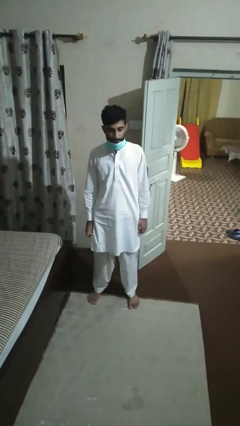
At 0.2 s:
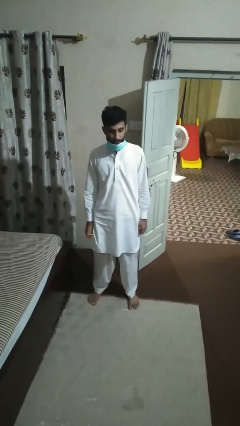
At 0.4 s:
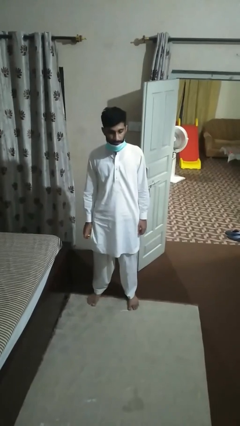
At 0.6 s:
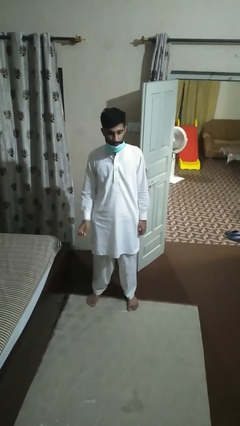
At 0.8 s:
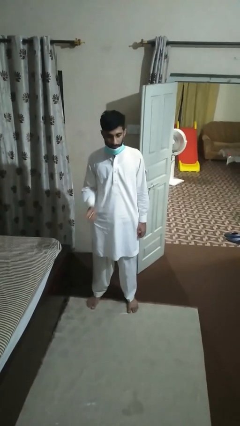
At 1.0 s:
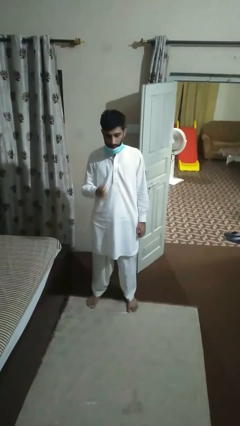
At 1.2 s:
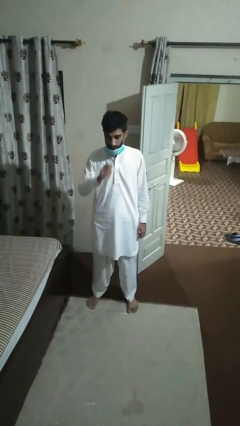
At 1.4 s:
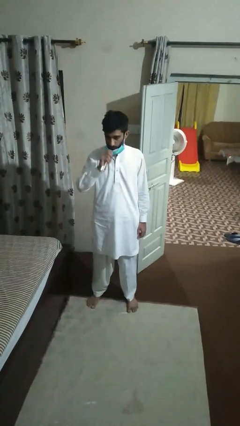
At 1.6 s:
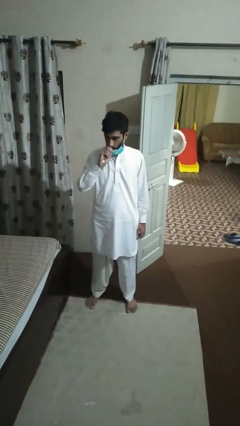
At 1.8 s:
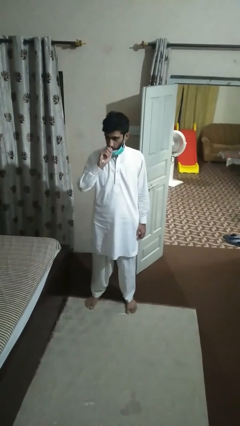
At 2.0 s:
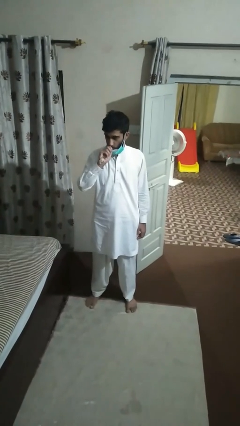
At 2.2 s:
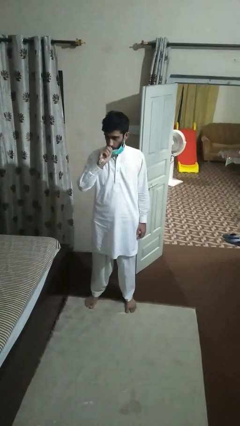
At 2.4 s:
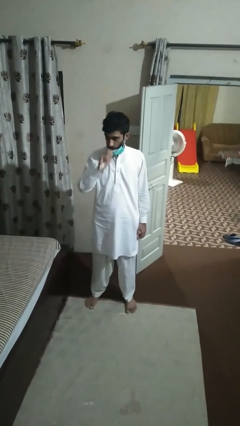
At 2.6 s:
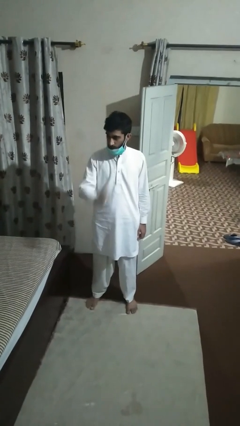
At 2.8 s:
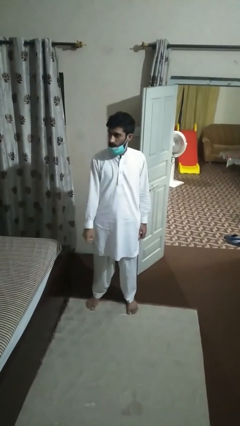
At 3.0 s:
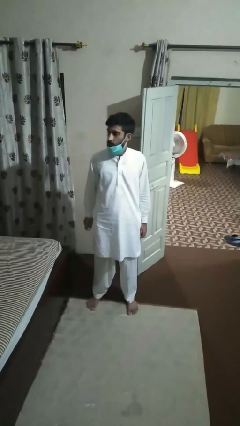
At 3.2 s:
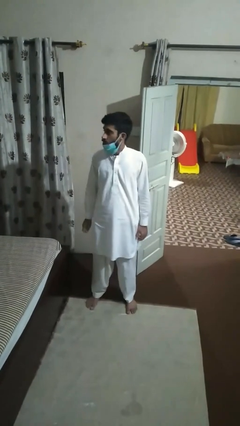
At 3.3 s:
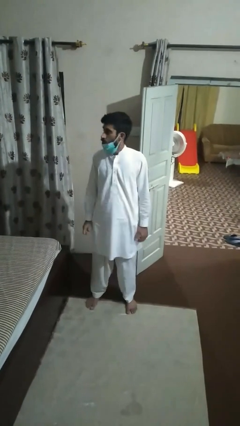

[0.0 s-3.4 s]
person vapes

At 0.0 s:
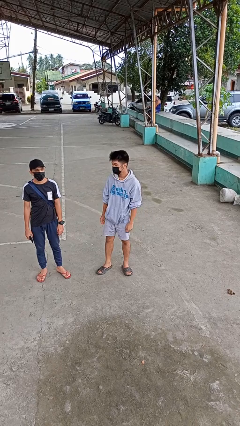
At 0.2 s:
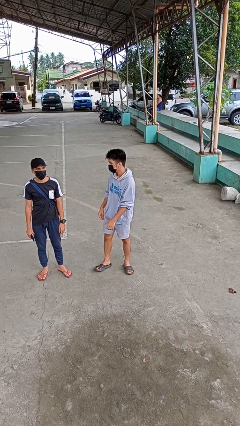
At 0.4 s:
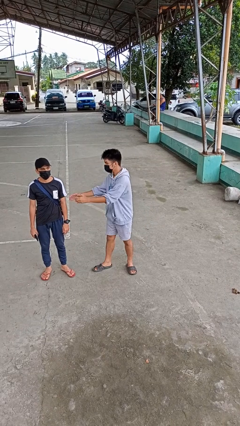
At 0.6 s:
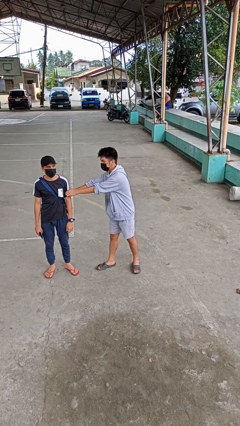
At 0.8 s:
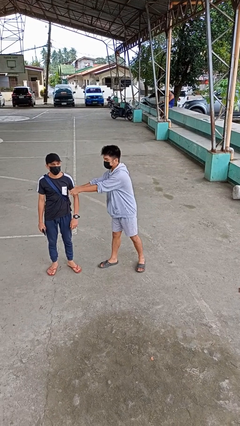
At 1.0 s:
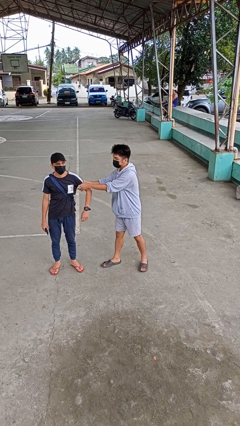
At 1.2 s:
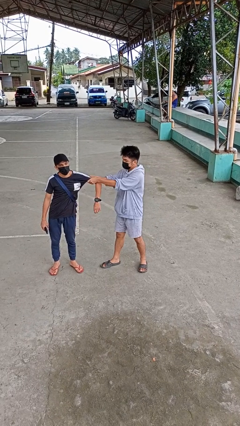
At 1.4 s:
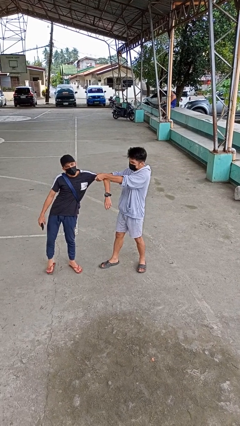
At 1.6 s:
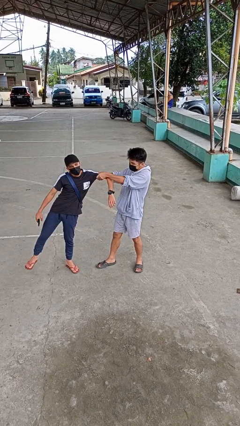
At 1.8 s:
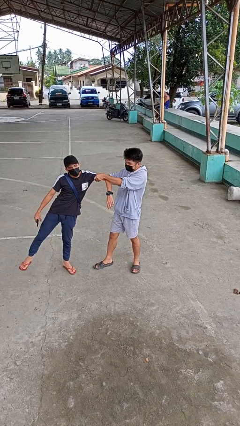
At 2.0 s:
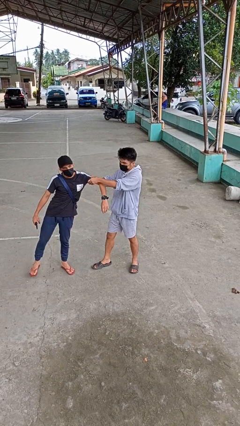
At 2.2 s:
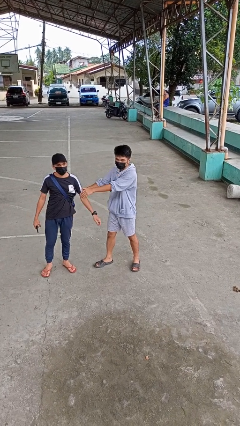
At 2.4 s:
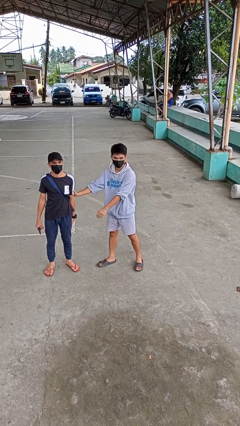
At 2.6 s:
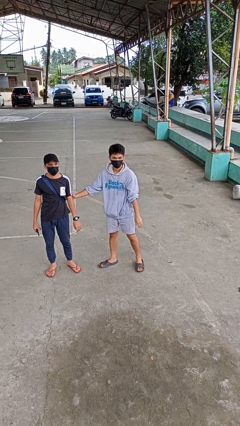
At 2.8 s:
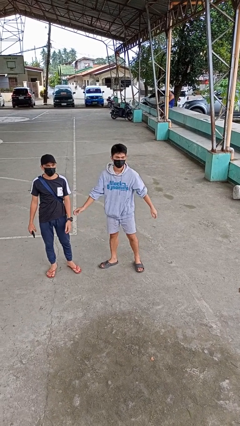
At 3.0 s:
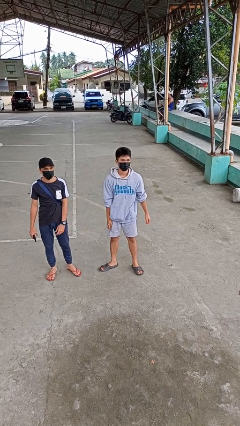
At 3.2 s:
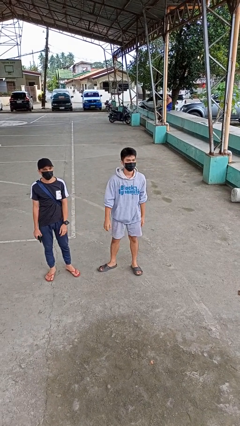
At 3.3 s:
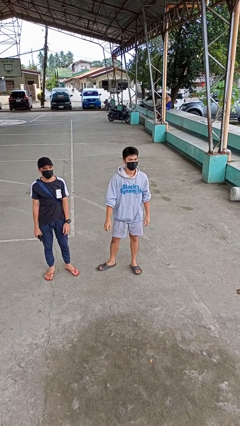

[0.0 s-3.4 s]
person grabs person by bicep

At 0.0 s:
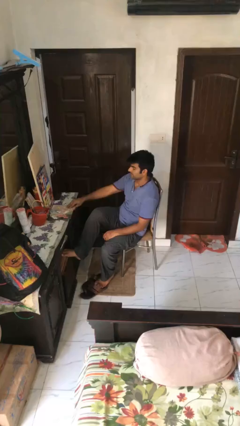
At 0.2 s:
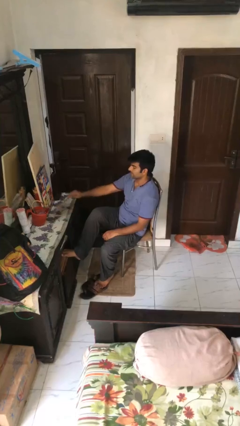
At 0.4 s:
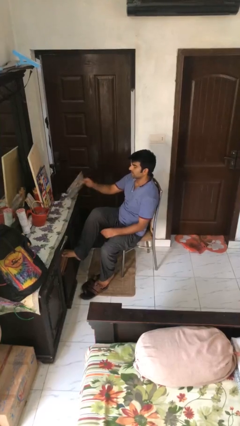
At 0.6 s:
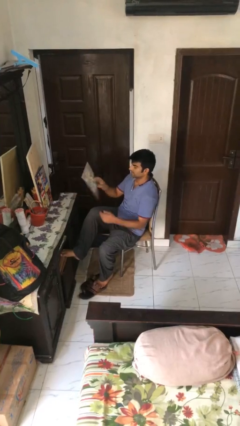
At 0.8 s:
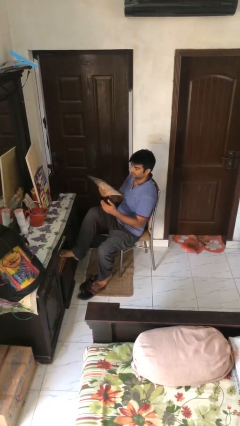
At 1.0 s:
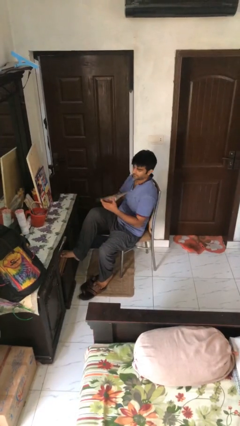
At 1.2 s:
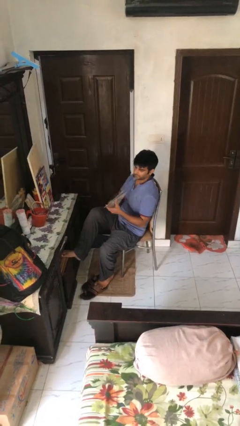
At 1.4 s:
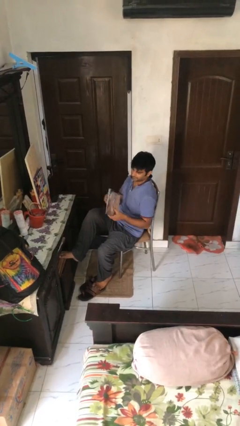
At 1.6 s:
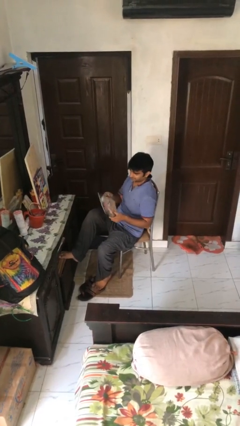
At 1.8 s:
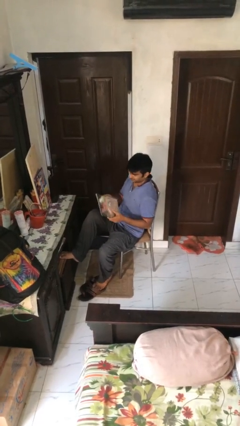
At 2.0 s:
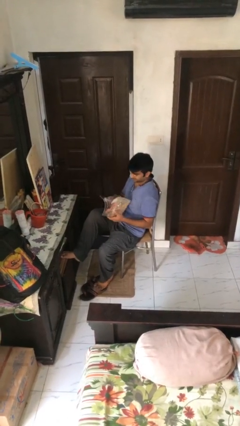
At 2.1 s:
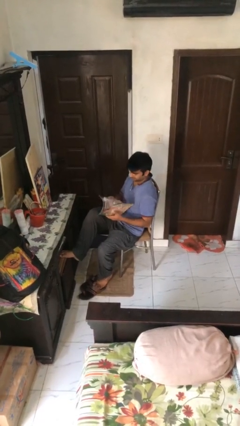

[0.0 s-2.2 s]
person picks up object from table

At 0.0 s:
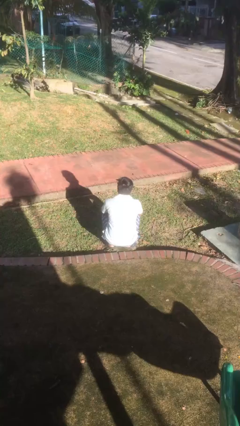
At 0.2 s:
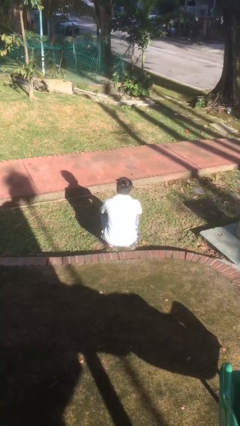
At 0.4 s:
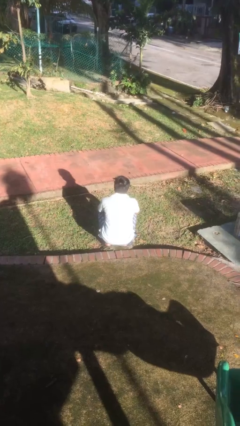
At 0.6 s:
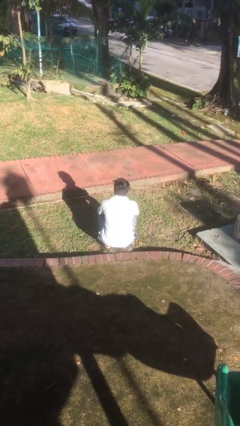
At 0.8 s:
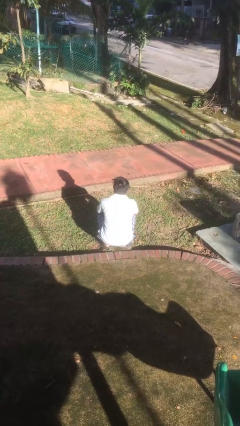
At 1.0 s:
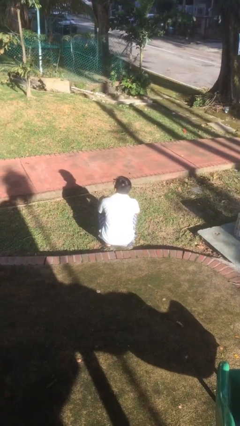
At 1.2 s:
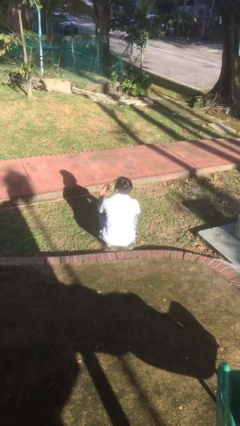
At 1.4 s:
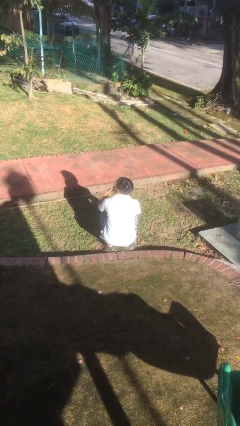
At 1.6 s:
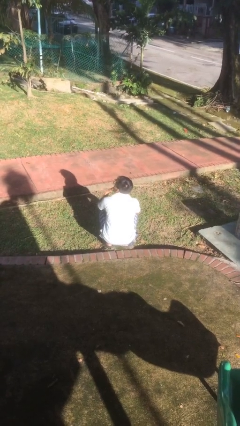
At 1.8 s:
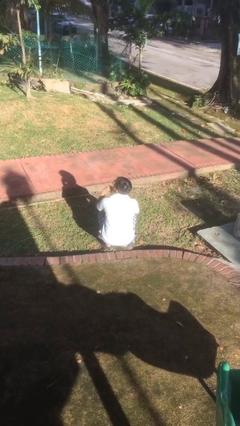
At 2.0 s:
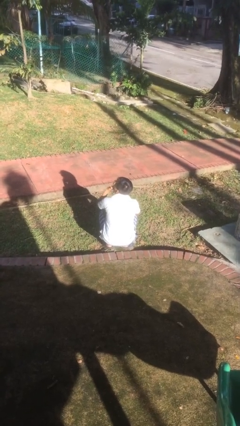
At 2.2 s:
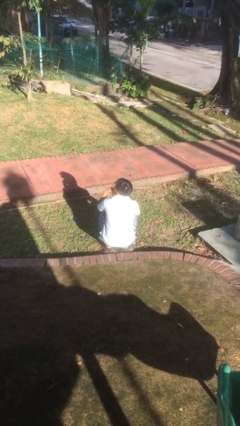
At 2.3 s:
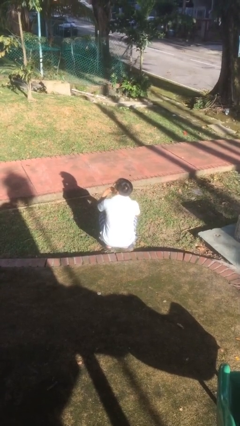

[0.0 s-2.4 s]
person strokes chin

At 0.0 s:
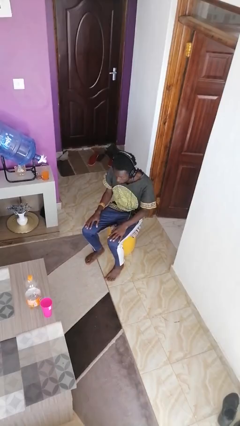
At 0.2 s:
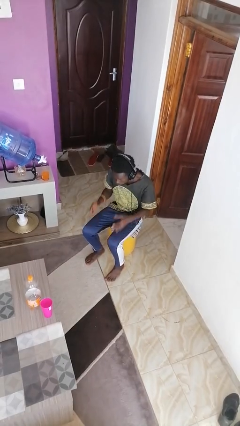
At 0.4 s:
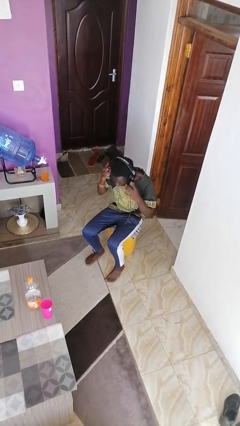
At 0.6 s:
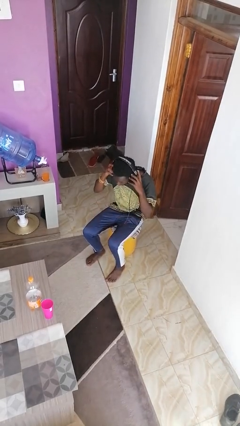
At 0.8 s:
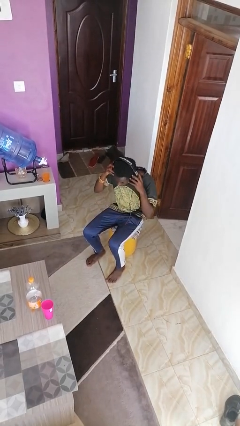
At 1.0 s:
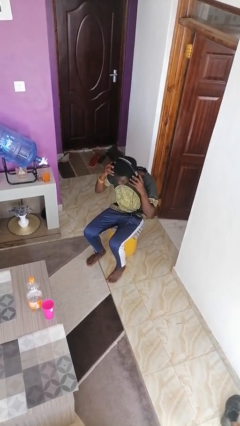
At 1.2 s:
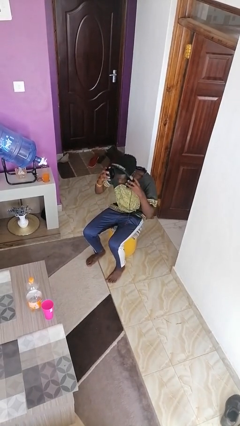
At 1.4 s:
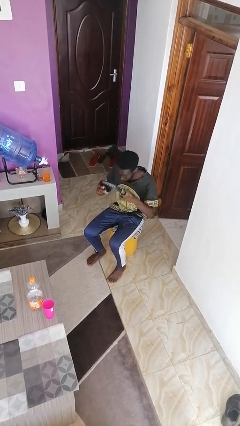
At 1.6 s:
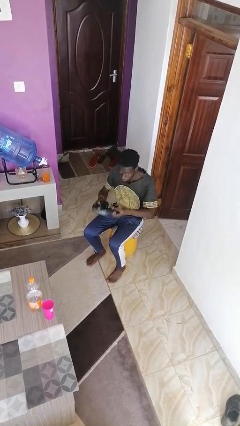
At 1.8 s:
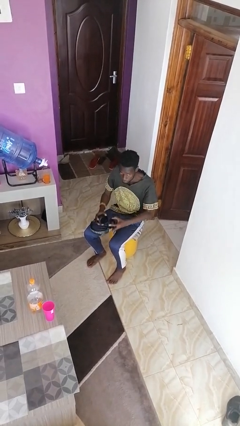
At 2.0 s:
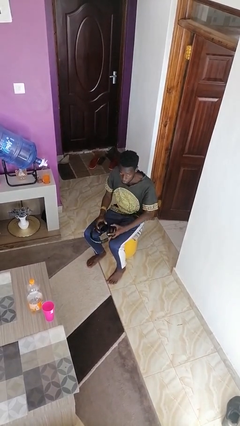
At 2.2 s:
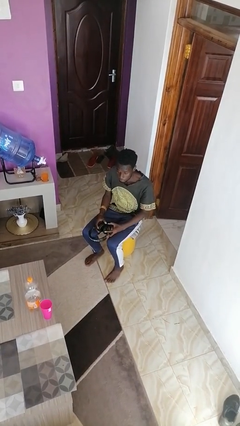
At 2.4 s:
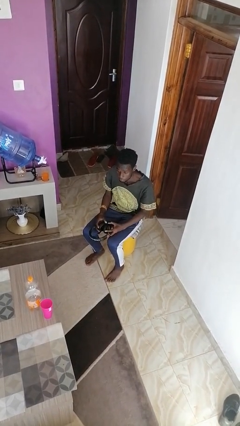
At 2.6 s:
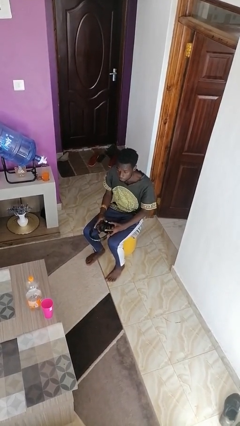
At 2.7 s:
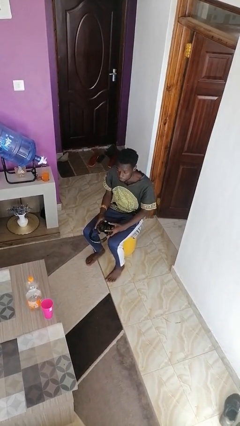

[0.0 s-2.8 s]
person takes off headphones

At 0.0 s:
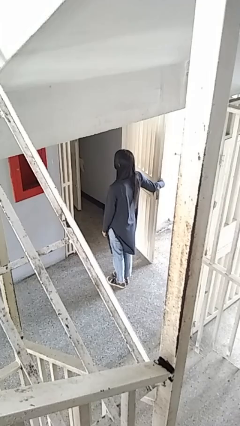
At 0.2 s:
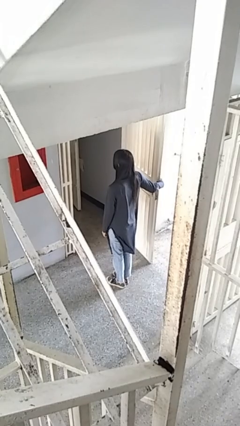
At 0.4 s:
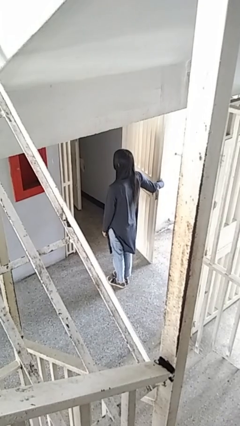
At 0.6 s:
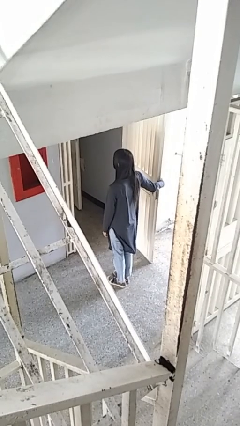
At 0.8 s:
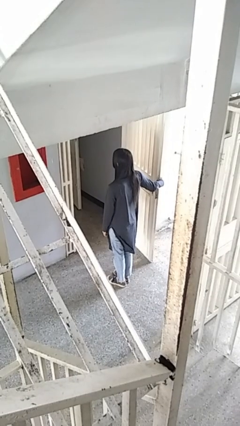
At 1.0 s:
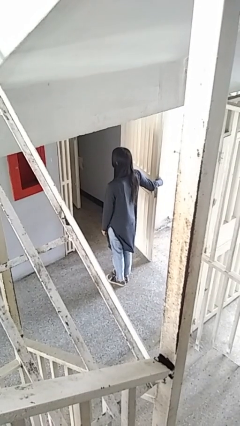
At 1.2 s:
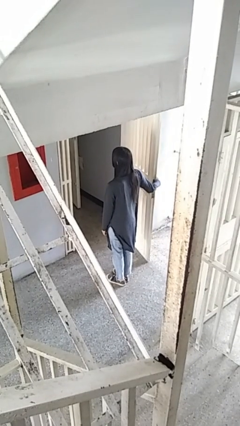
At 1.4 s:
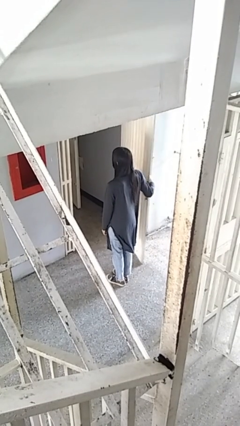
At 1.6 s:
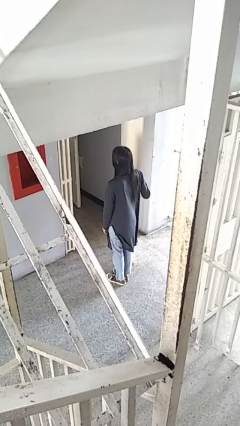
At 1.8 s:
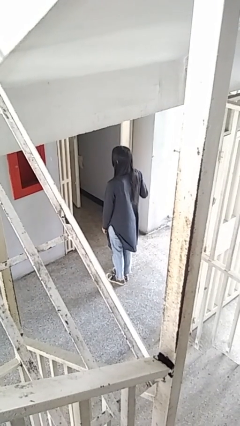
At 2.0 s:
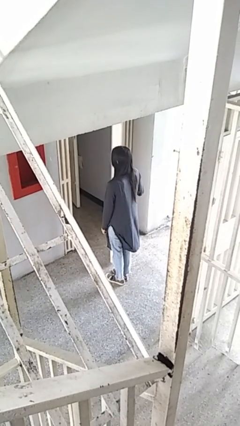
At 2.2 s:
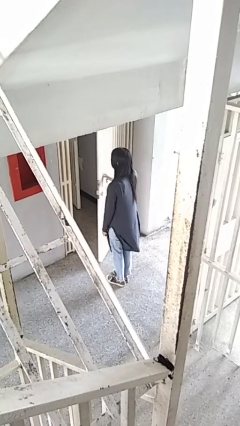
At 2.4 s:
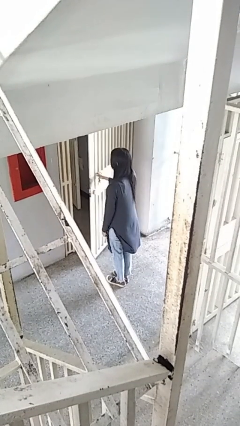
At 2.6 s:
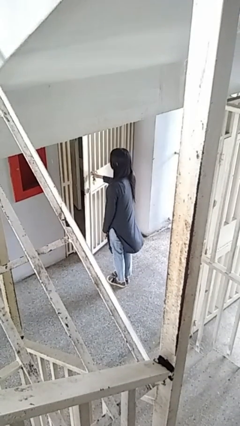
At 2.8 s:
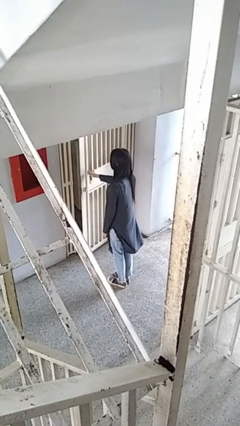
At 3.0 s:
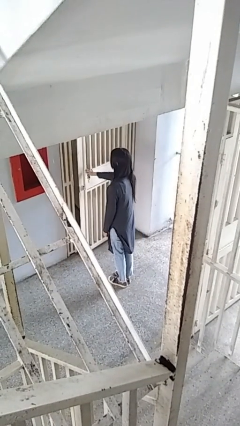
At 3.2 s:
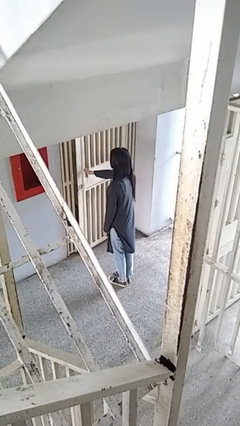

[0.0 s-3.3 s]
person closes gate
